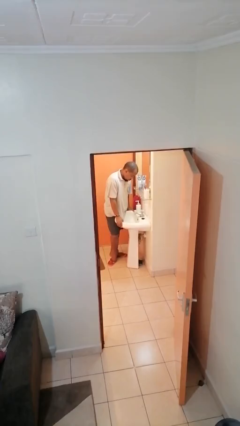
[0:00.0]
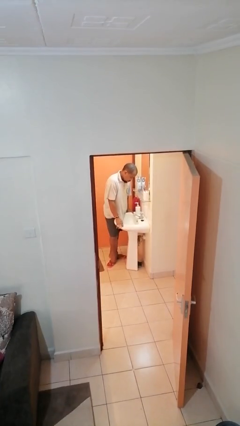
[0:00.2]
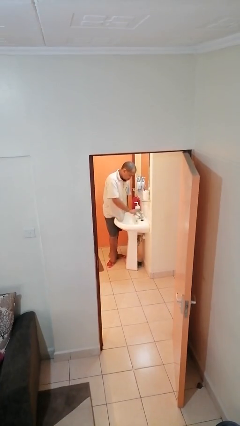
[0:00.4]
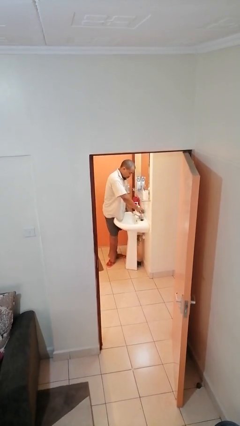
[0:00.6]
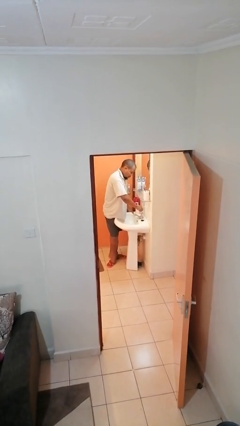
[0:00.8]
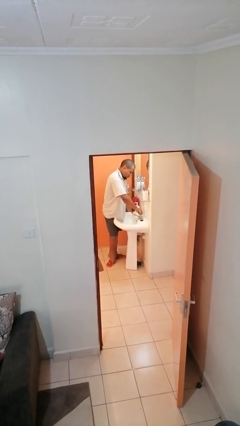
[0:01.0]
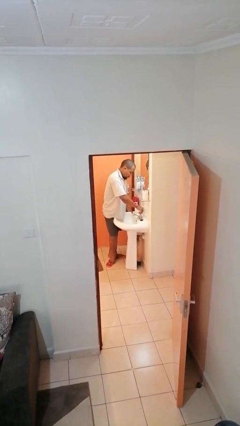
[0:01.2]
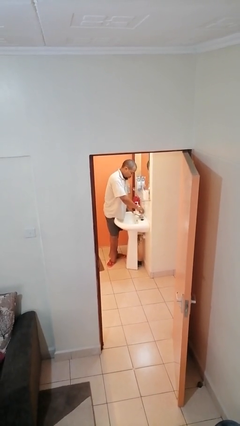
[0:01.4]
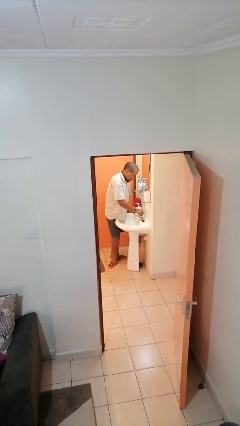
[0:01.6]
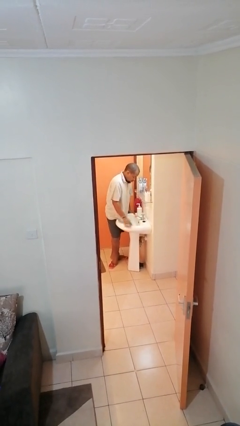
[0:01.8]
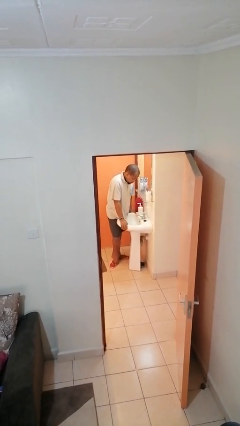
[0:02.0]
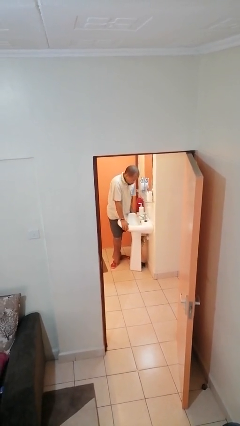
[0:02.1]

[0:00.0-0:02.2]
person turns off faucet

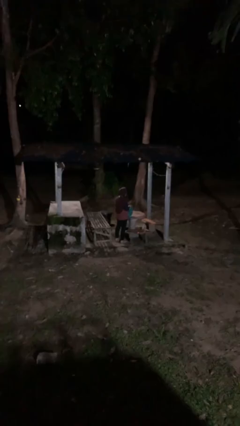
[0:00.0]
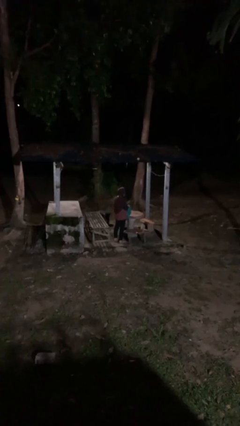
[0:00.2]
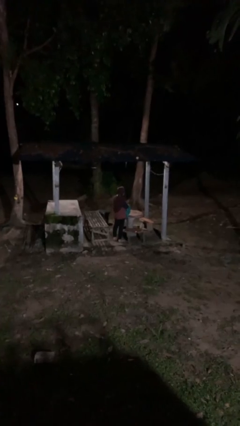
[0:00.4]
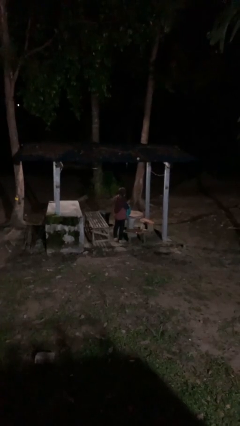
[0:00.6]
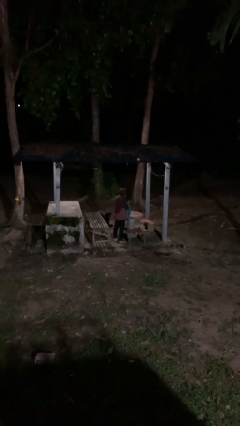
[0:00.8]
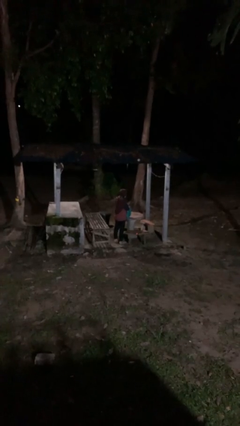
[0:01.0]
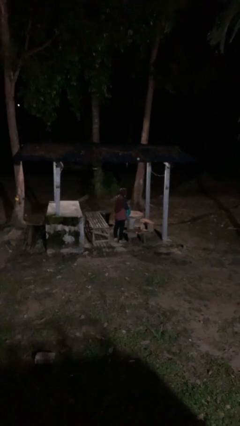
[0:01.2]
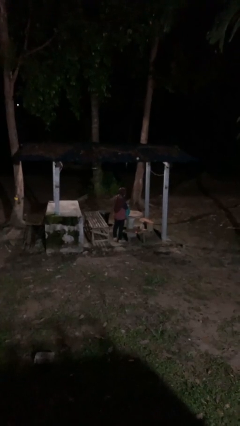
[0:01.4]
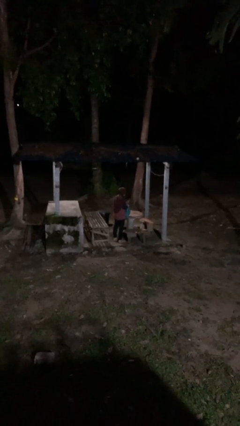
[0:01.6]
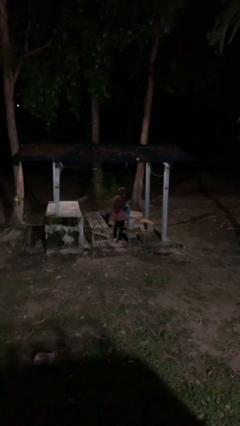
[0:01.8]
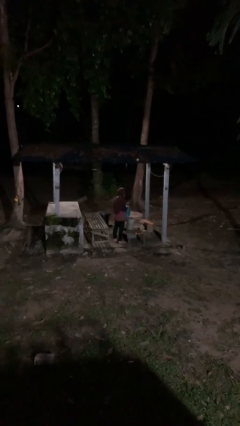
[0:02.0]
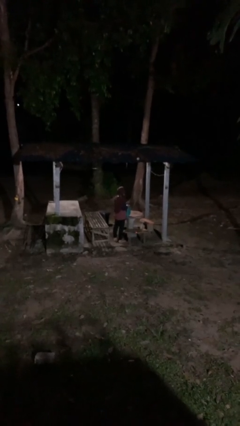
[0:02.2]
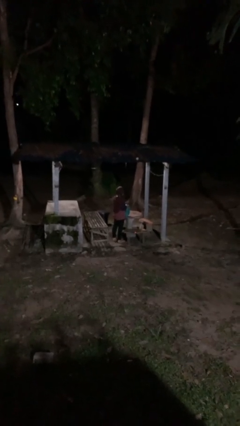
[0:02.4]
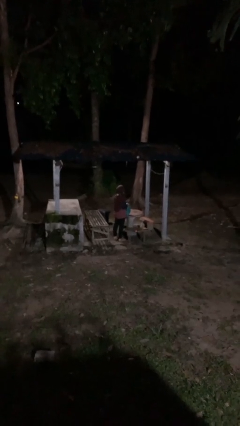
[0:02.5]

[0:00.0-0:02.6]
person searches in bag

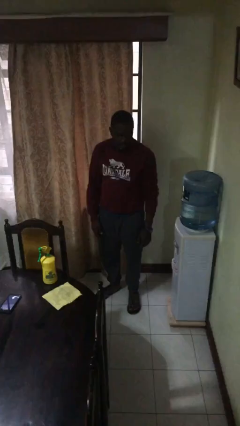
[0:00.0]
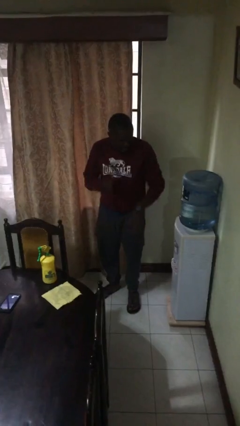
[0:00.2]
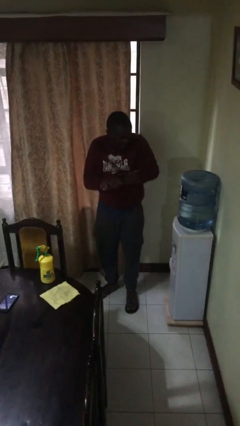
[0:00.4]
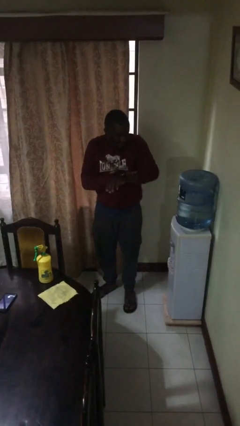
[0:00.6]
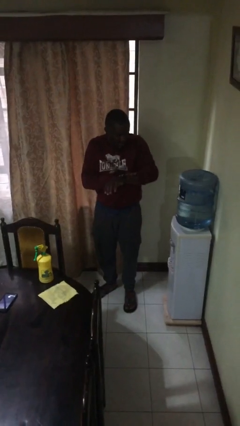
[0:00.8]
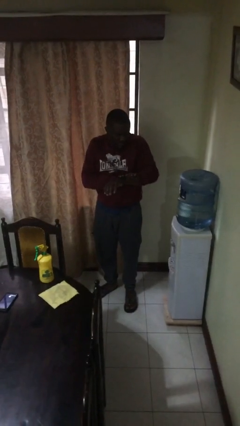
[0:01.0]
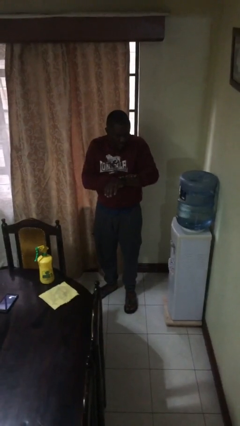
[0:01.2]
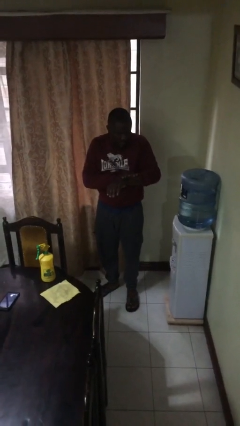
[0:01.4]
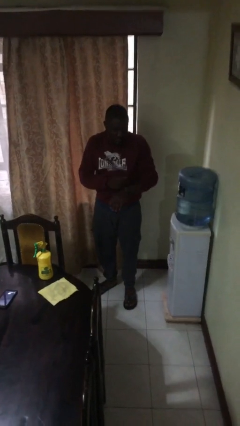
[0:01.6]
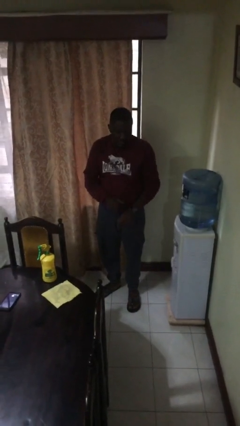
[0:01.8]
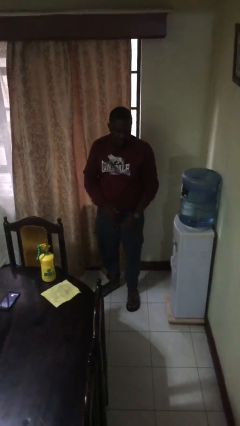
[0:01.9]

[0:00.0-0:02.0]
person swats bug

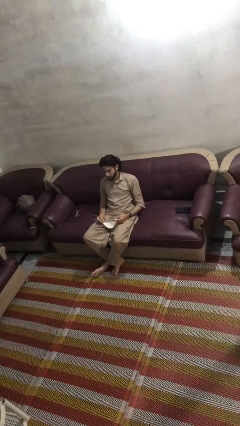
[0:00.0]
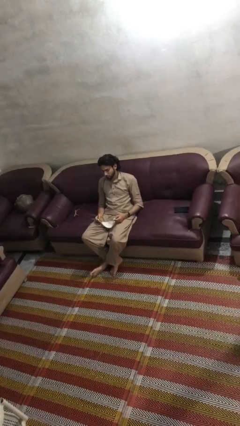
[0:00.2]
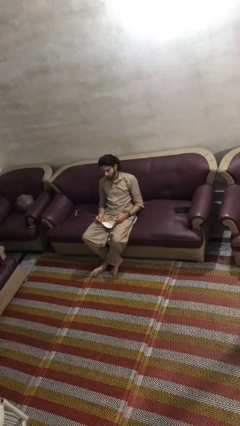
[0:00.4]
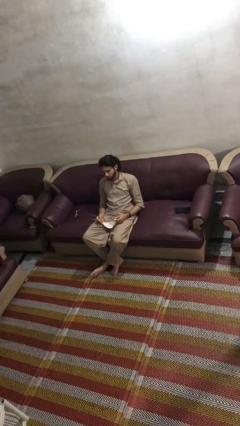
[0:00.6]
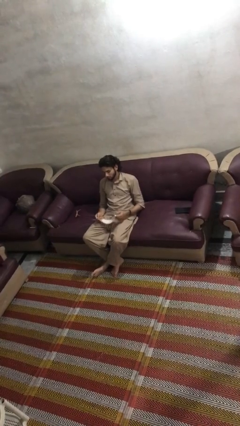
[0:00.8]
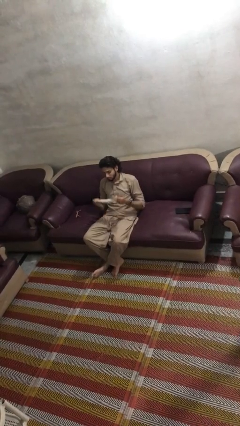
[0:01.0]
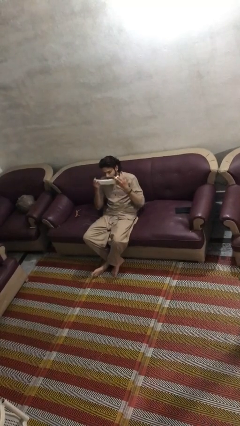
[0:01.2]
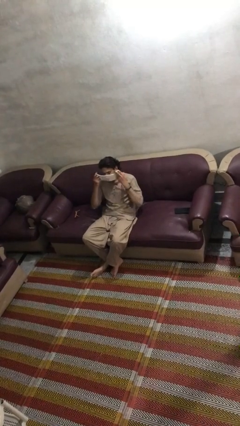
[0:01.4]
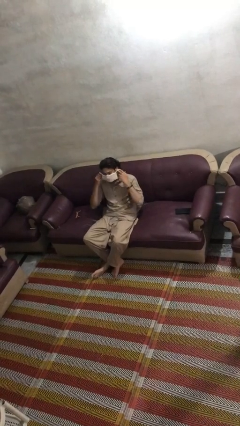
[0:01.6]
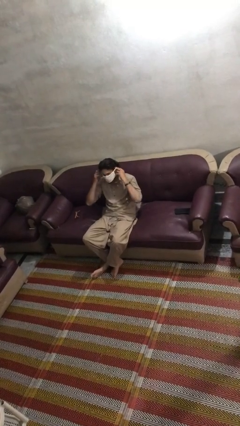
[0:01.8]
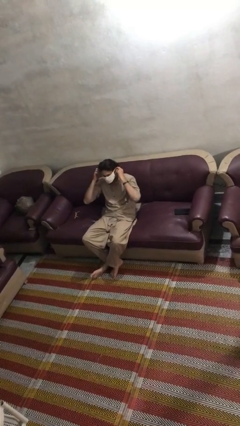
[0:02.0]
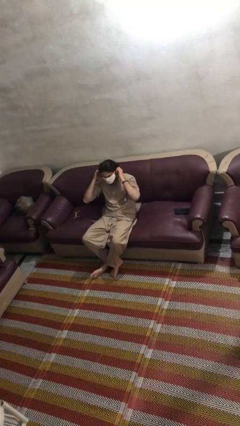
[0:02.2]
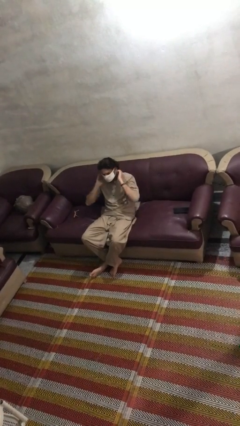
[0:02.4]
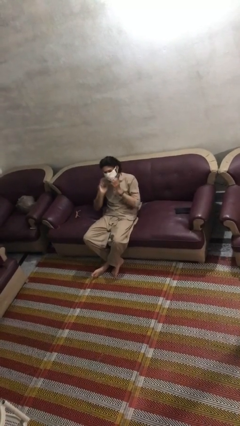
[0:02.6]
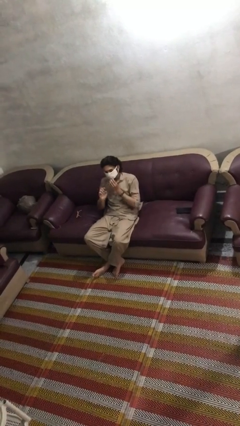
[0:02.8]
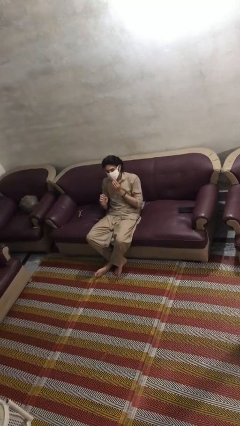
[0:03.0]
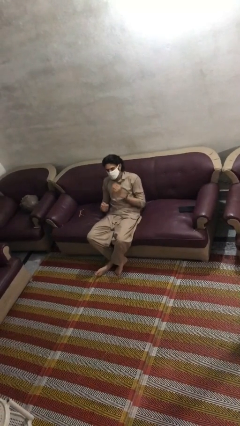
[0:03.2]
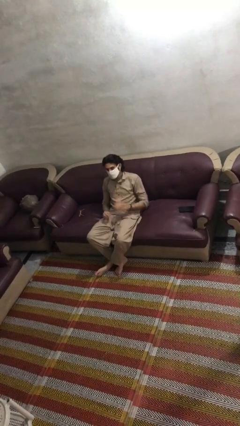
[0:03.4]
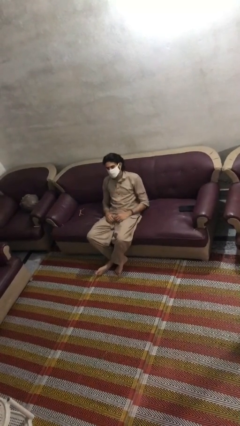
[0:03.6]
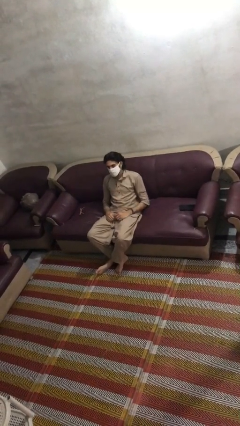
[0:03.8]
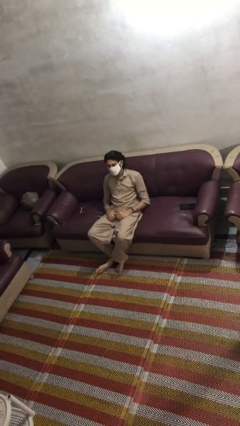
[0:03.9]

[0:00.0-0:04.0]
person puts on facemask

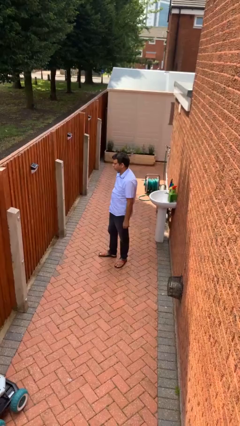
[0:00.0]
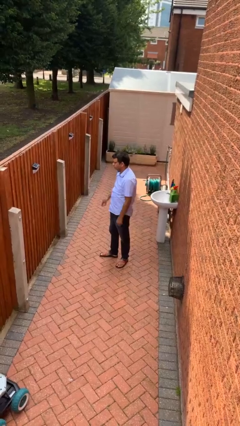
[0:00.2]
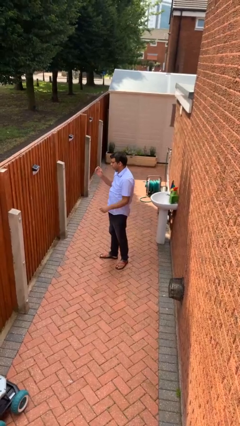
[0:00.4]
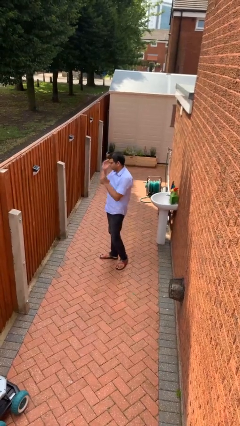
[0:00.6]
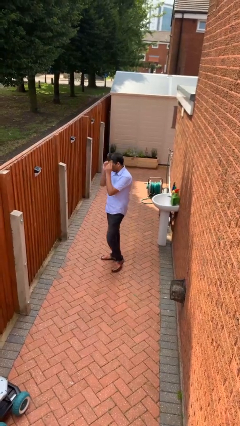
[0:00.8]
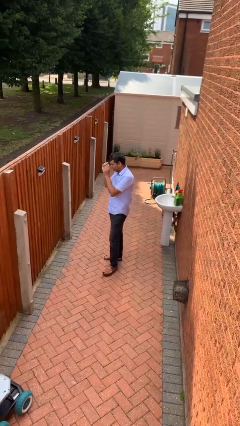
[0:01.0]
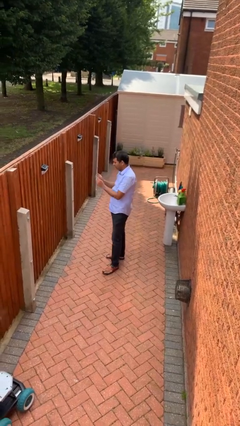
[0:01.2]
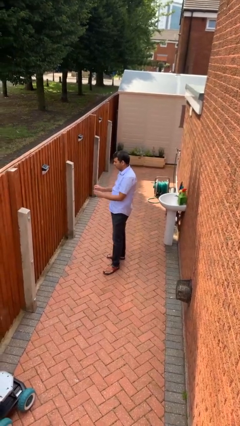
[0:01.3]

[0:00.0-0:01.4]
person takes off glasses

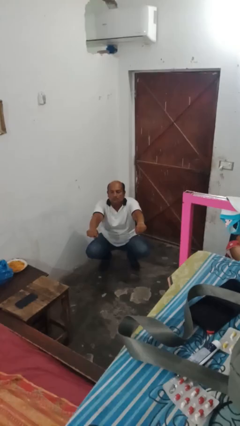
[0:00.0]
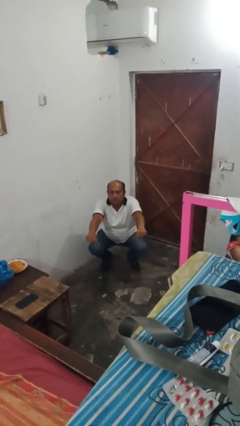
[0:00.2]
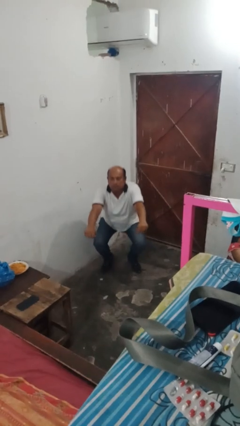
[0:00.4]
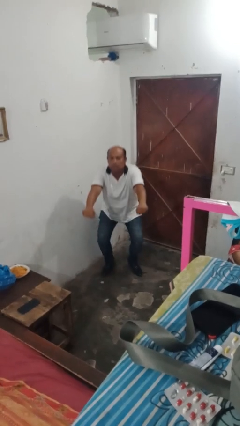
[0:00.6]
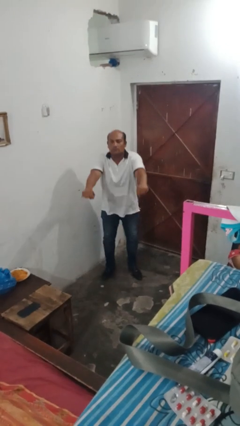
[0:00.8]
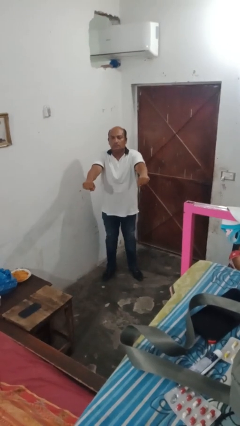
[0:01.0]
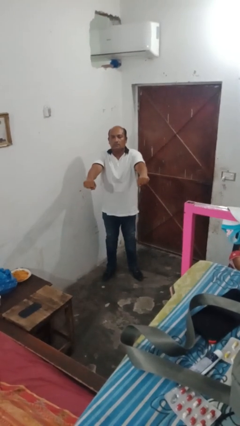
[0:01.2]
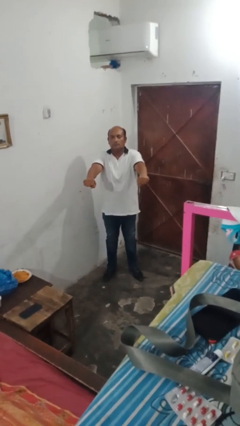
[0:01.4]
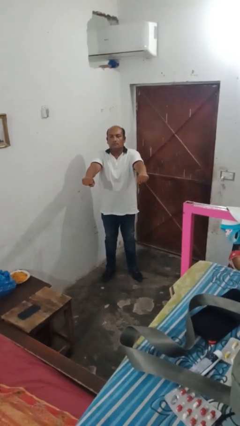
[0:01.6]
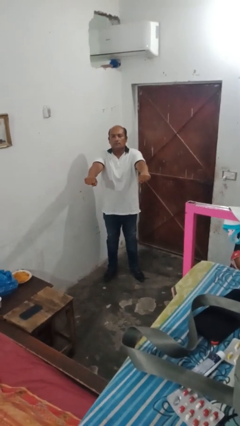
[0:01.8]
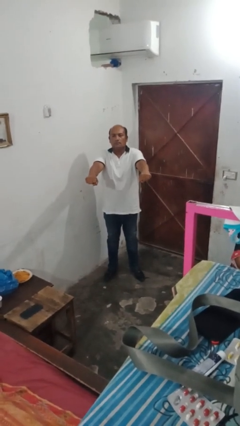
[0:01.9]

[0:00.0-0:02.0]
person stands up

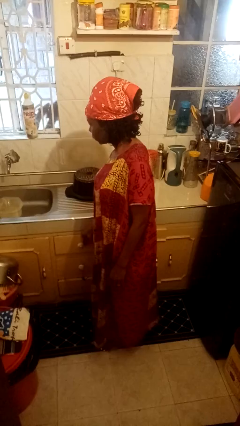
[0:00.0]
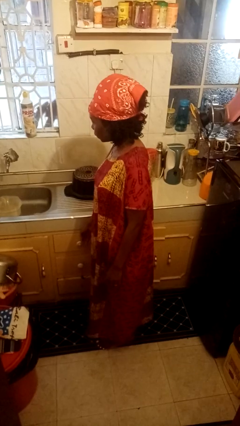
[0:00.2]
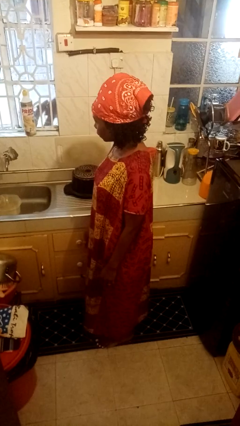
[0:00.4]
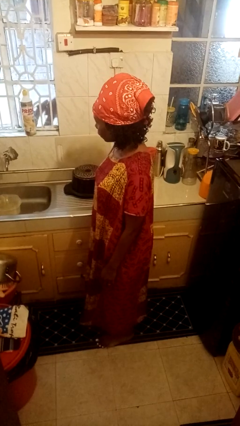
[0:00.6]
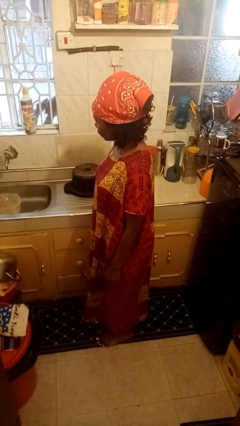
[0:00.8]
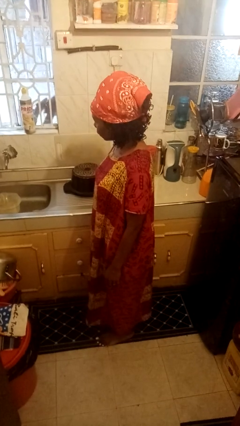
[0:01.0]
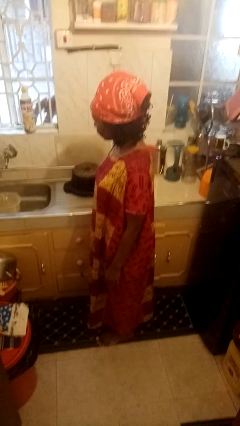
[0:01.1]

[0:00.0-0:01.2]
person closes kitchen drawer

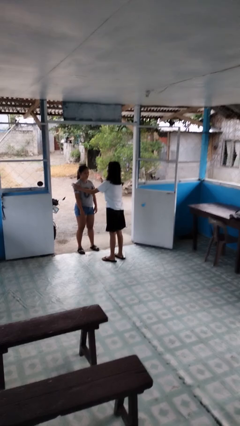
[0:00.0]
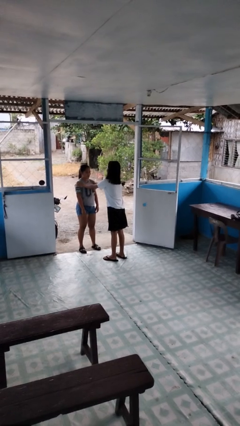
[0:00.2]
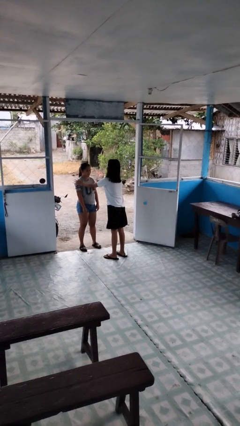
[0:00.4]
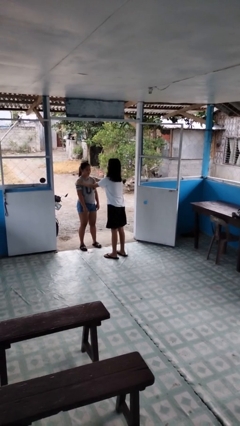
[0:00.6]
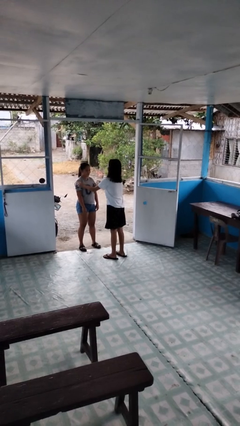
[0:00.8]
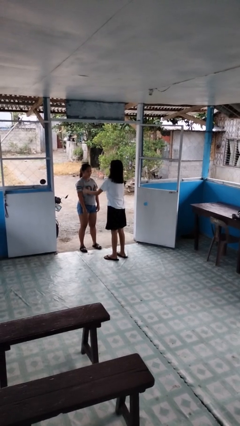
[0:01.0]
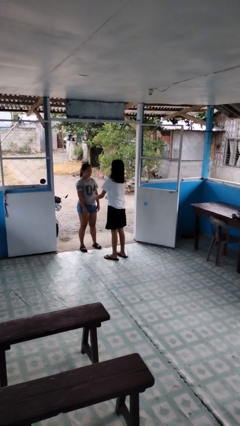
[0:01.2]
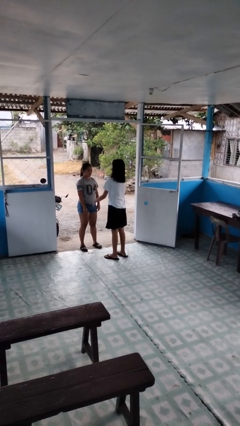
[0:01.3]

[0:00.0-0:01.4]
person pounds shoulders of person

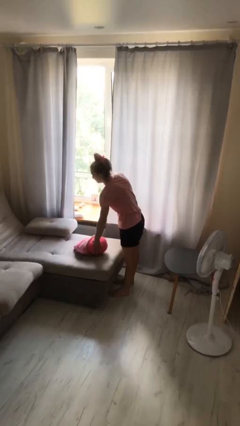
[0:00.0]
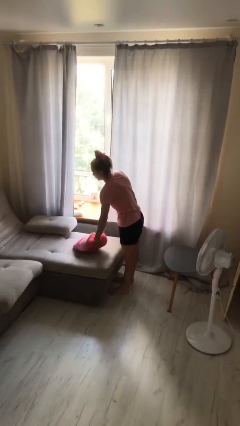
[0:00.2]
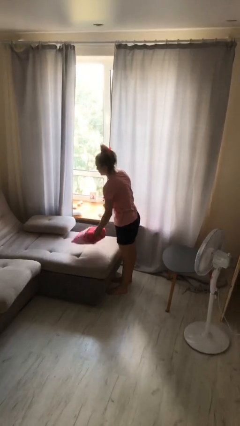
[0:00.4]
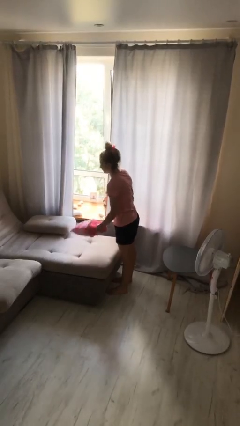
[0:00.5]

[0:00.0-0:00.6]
person picks up object from couch
